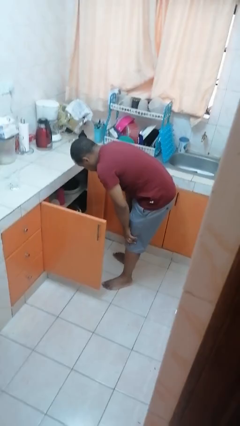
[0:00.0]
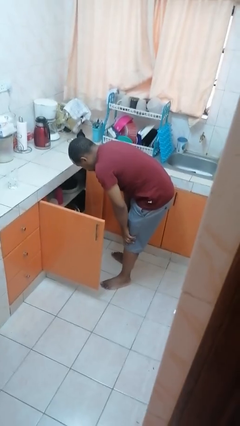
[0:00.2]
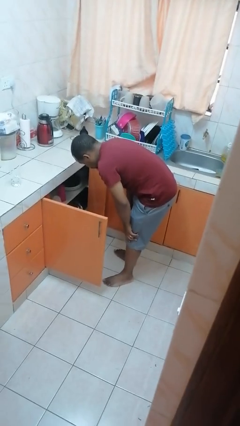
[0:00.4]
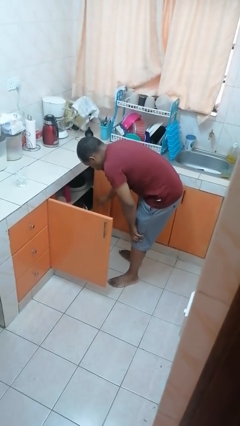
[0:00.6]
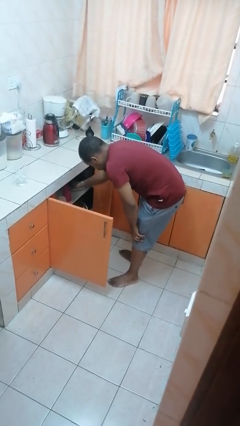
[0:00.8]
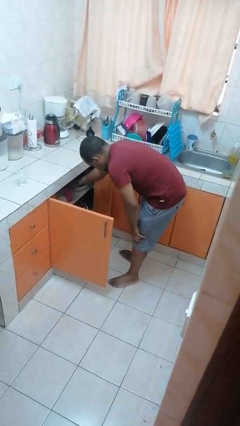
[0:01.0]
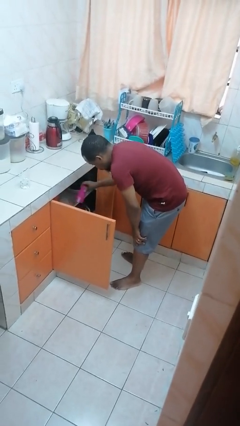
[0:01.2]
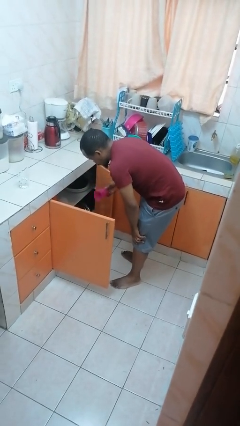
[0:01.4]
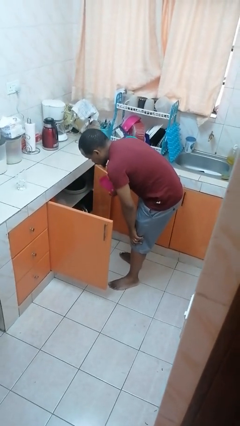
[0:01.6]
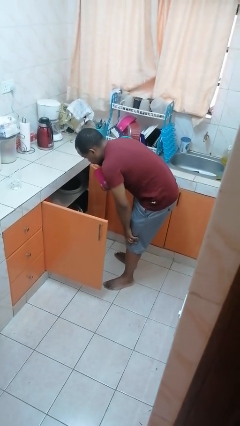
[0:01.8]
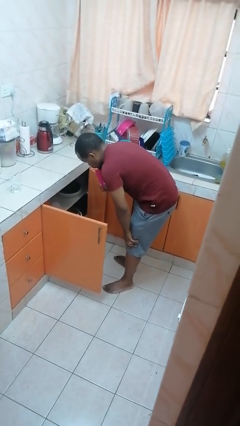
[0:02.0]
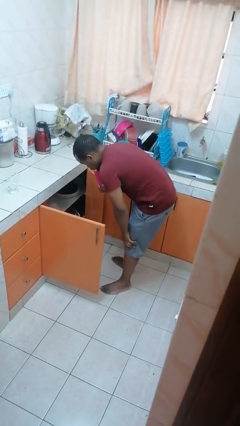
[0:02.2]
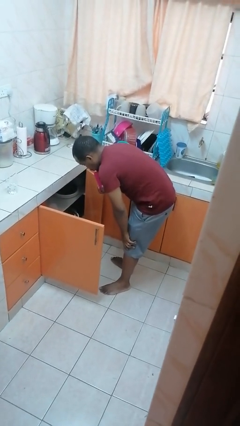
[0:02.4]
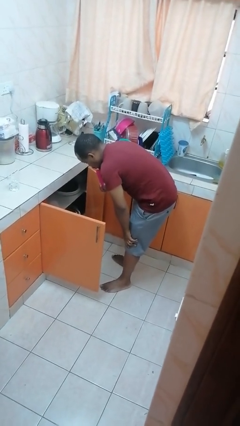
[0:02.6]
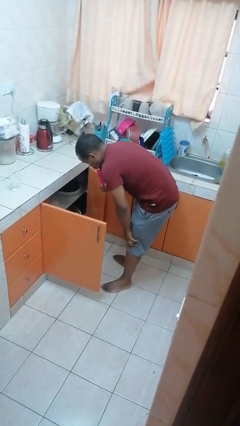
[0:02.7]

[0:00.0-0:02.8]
person takes object from cabinet

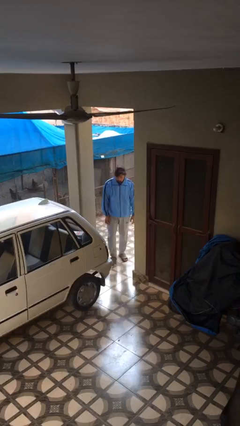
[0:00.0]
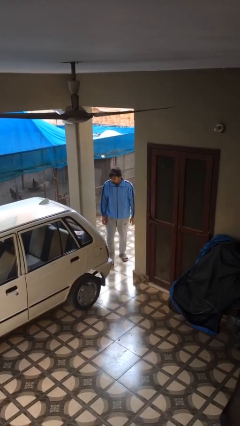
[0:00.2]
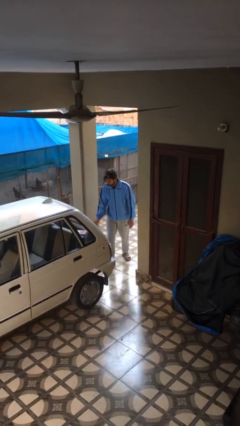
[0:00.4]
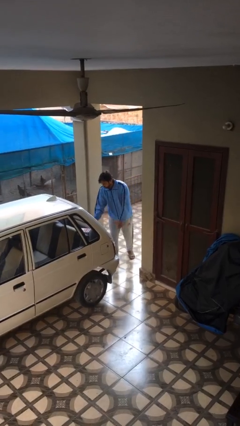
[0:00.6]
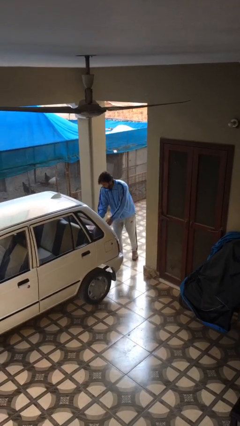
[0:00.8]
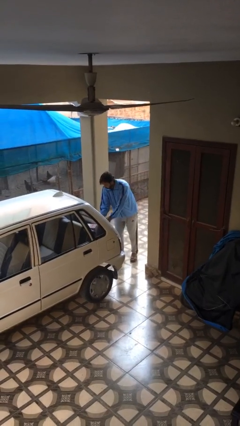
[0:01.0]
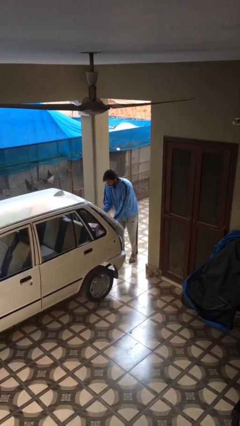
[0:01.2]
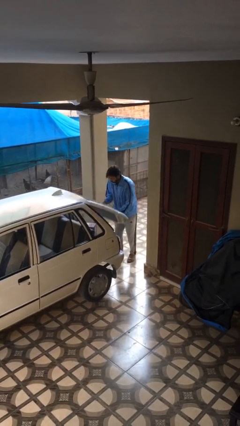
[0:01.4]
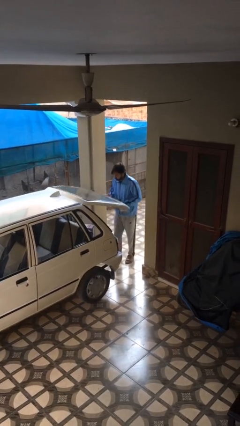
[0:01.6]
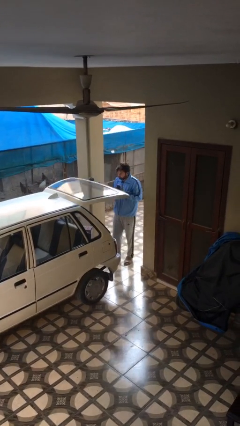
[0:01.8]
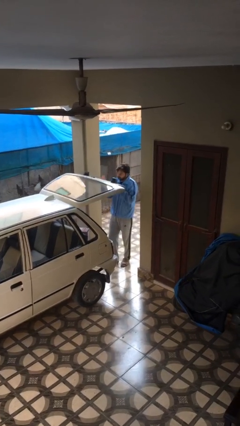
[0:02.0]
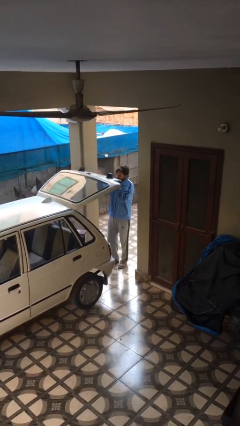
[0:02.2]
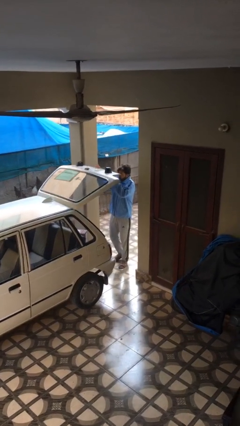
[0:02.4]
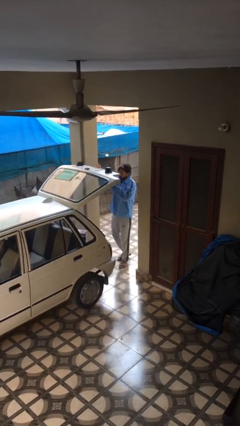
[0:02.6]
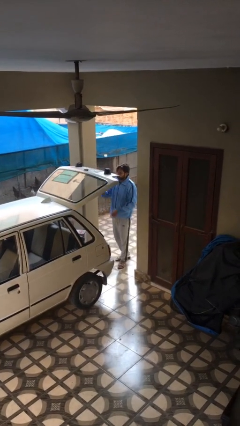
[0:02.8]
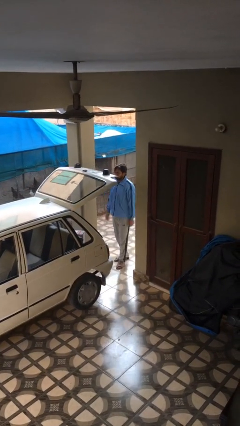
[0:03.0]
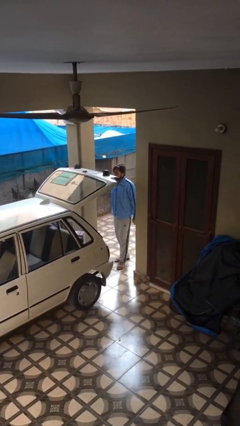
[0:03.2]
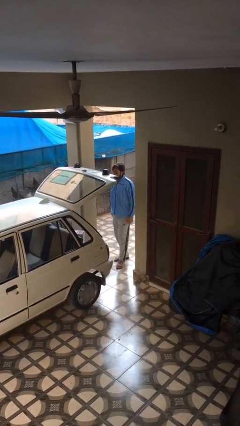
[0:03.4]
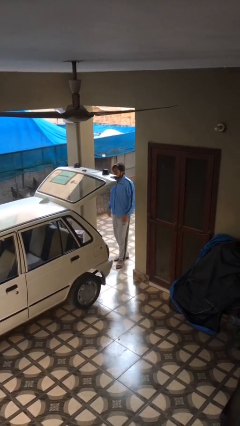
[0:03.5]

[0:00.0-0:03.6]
person opens car trunk

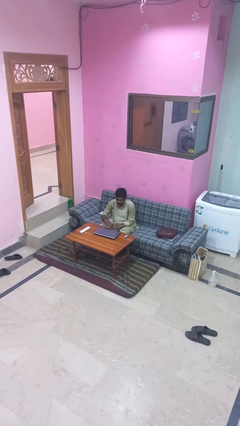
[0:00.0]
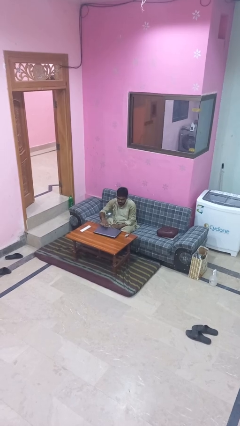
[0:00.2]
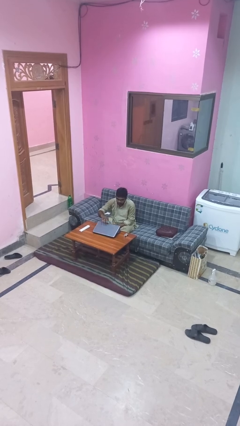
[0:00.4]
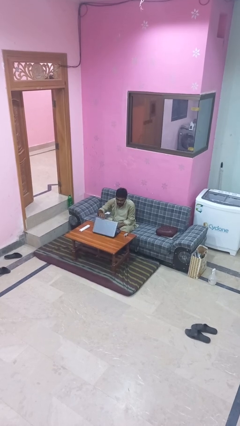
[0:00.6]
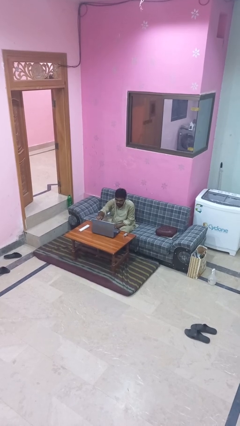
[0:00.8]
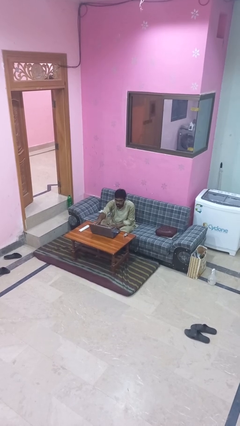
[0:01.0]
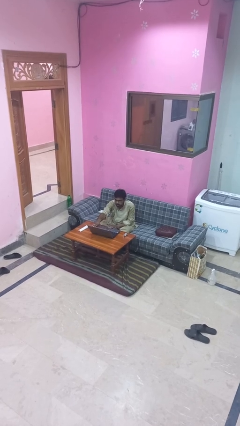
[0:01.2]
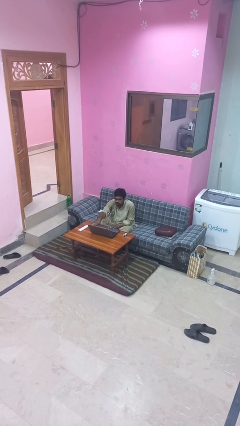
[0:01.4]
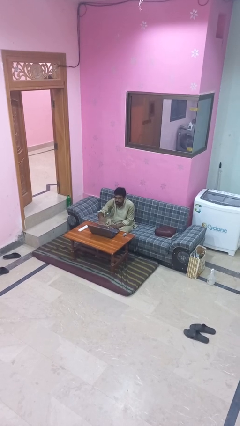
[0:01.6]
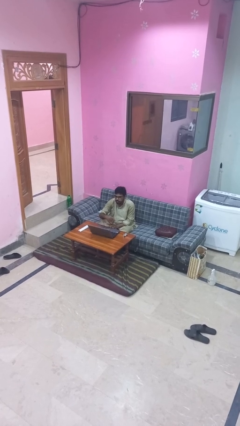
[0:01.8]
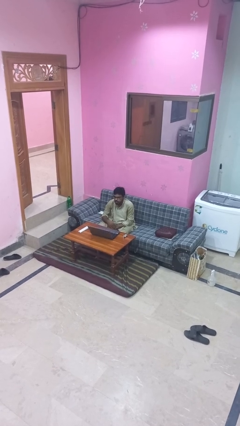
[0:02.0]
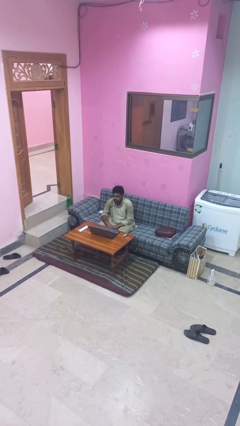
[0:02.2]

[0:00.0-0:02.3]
person opens laptop

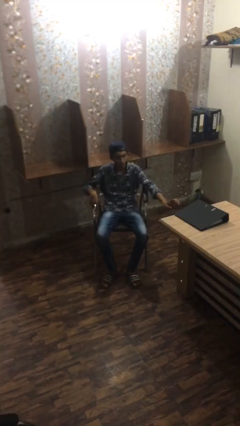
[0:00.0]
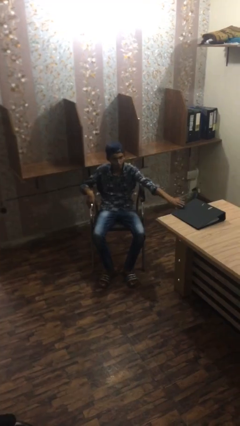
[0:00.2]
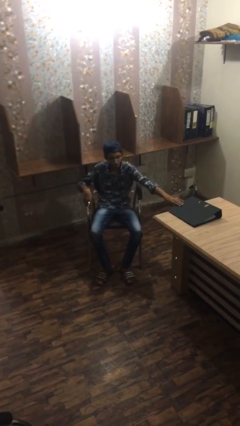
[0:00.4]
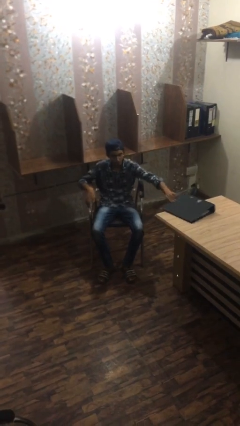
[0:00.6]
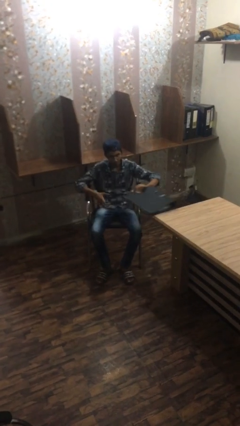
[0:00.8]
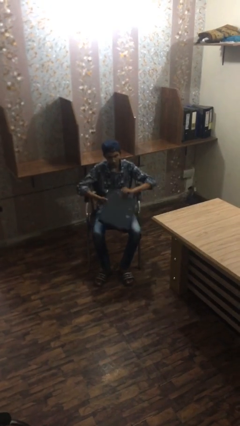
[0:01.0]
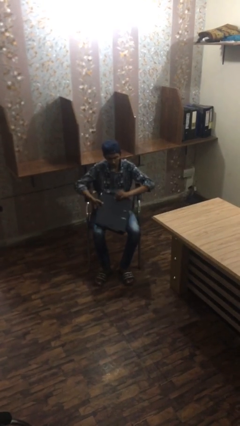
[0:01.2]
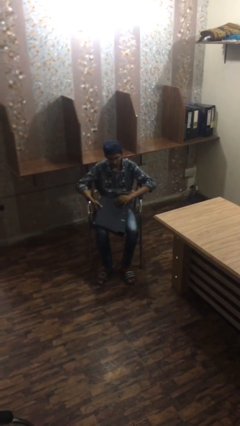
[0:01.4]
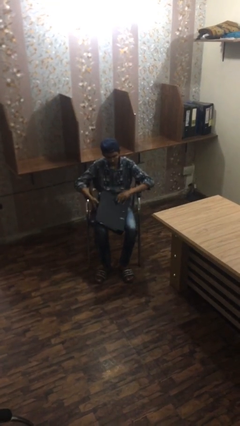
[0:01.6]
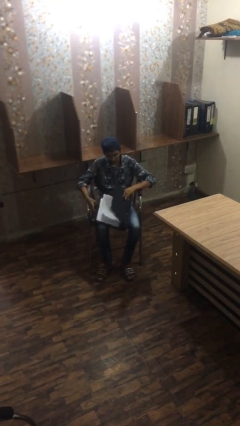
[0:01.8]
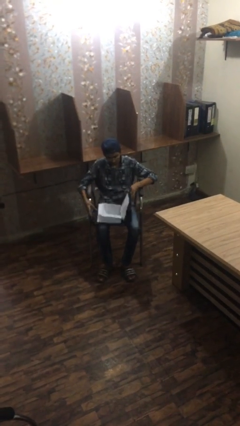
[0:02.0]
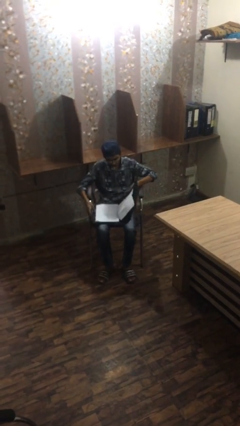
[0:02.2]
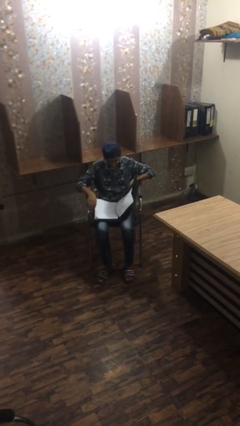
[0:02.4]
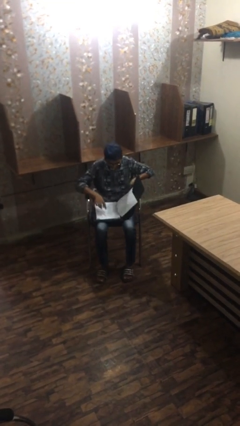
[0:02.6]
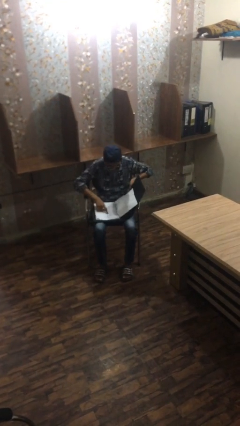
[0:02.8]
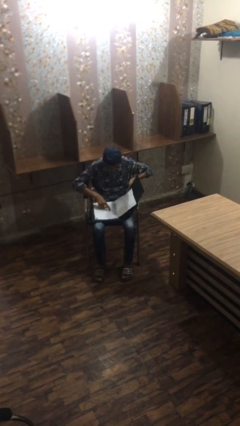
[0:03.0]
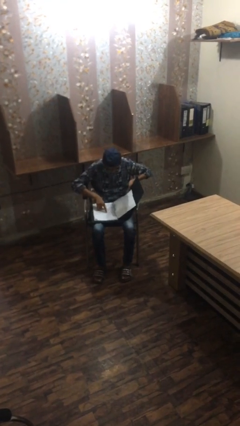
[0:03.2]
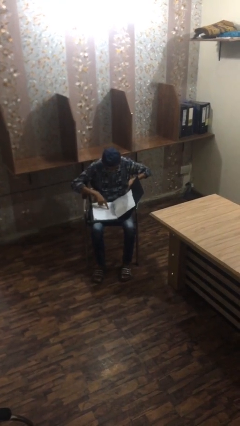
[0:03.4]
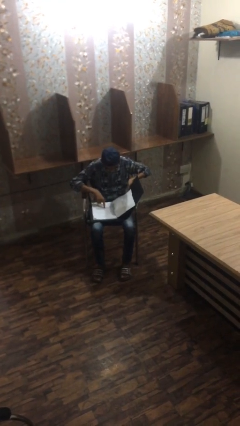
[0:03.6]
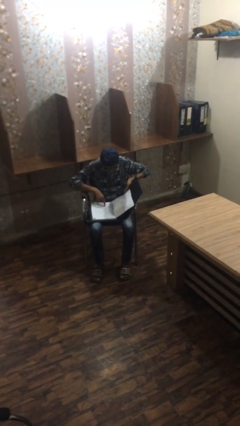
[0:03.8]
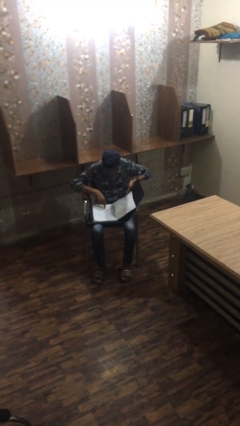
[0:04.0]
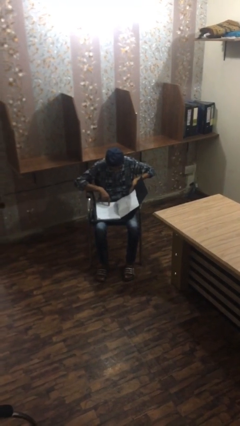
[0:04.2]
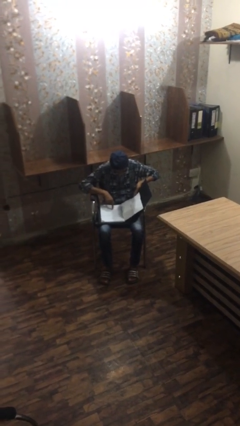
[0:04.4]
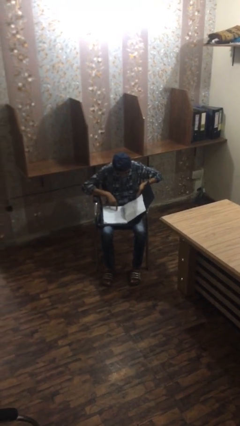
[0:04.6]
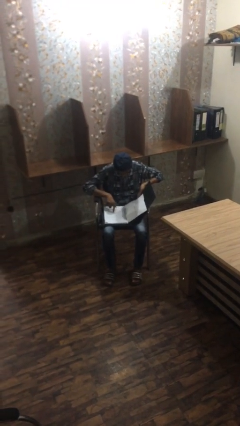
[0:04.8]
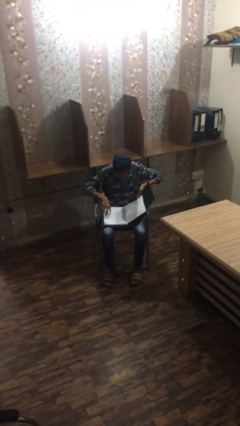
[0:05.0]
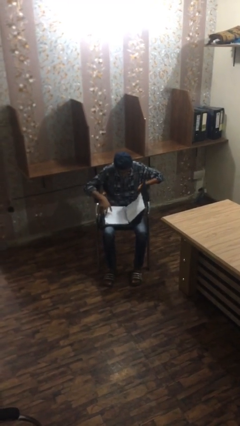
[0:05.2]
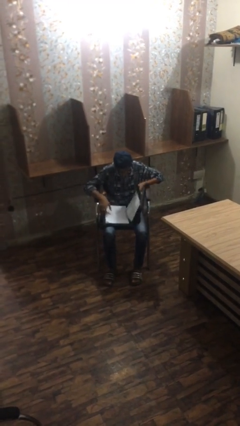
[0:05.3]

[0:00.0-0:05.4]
person reads document

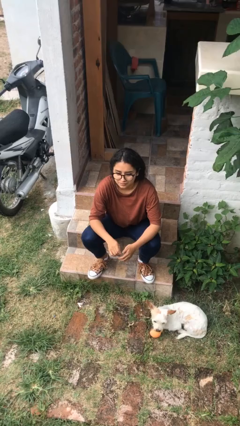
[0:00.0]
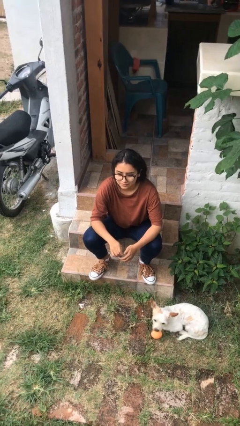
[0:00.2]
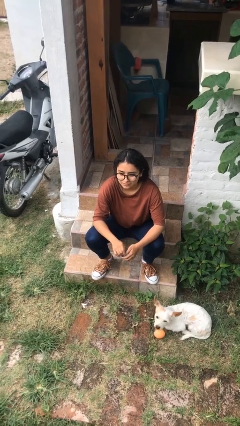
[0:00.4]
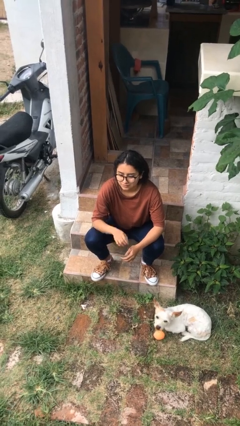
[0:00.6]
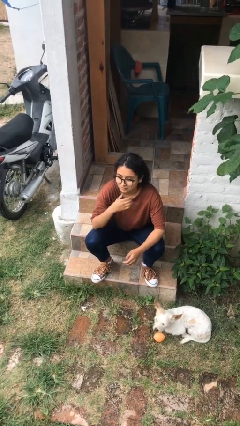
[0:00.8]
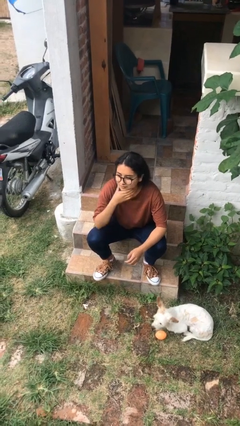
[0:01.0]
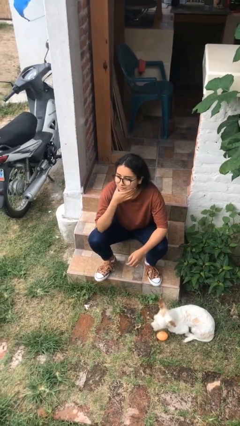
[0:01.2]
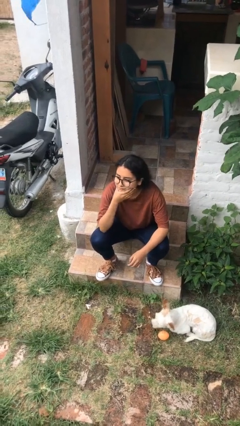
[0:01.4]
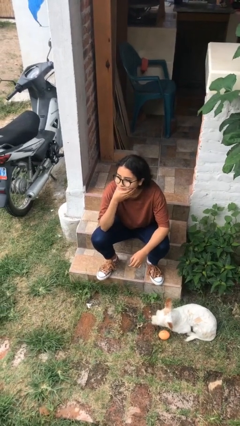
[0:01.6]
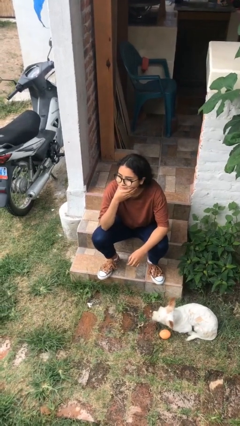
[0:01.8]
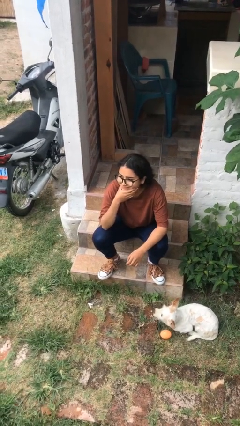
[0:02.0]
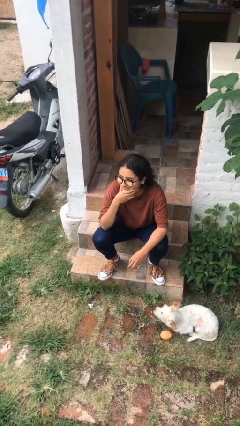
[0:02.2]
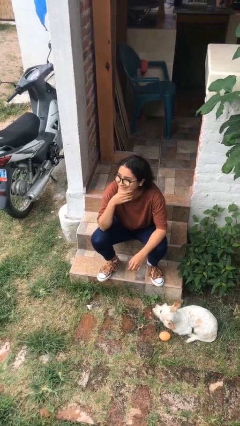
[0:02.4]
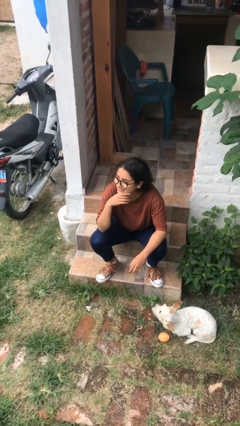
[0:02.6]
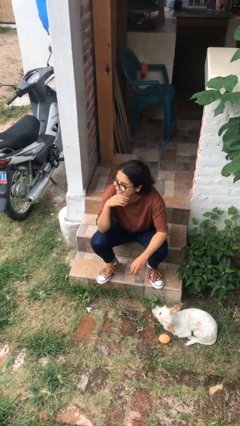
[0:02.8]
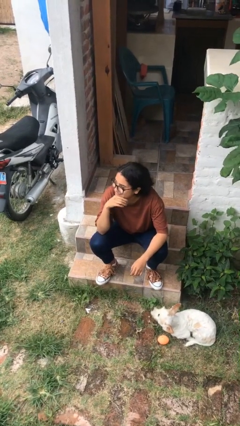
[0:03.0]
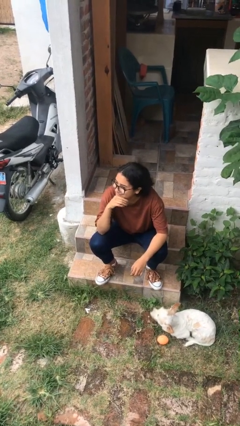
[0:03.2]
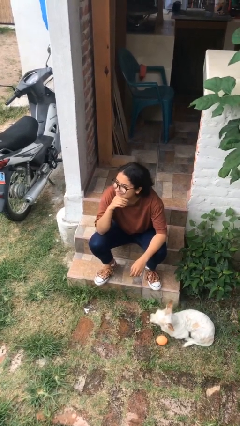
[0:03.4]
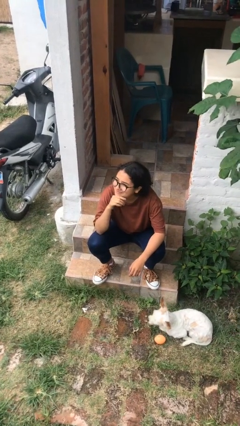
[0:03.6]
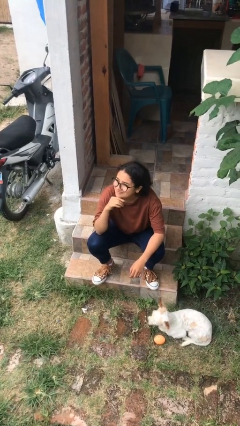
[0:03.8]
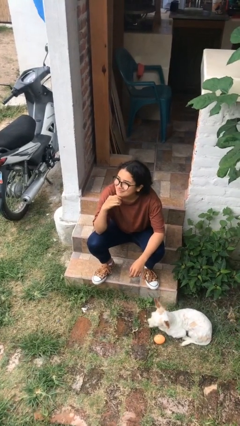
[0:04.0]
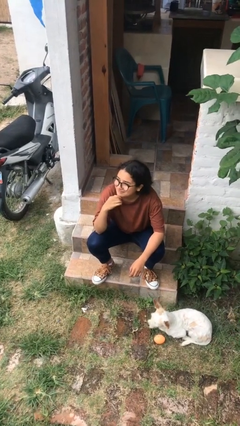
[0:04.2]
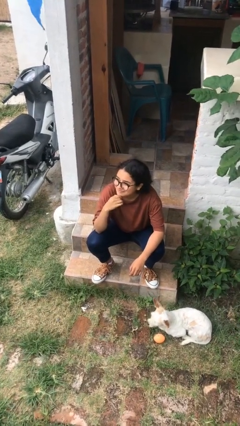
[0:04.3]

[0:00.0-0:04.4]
person strokes chin
